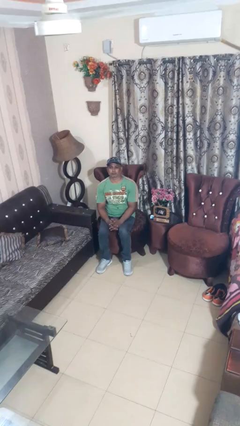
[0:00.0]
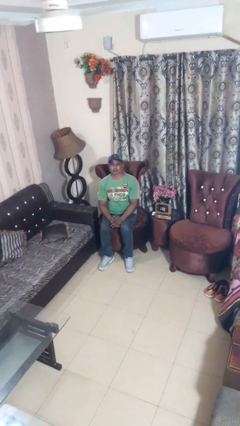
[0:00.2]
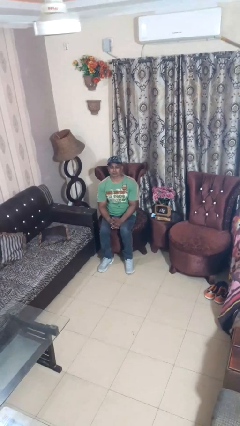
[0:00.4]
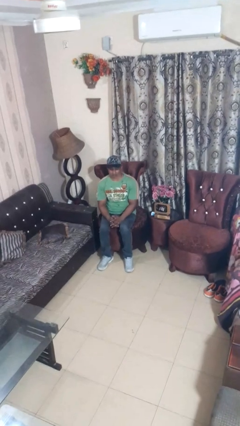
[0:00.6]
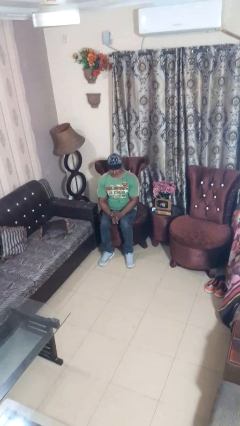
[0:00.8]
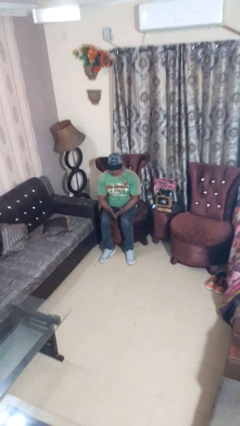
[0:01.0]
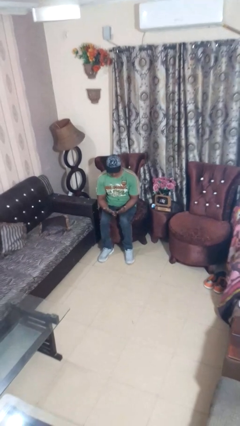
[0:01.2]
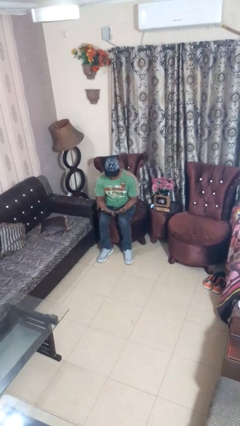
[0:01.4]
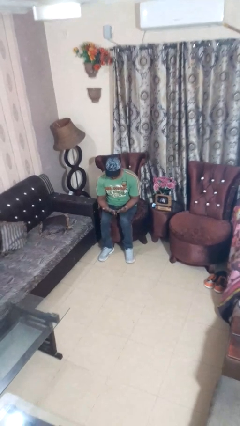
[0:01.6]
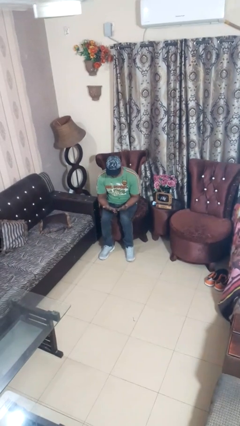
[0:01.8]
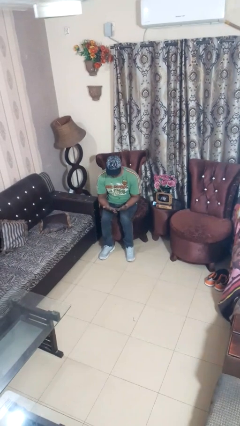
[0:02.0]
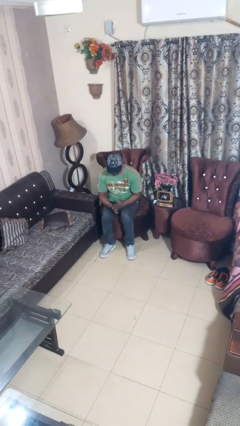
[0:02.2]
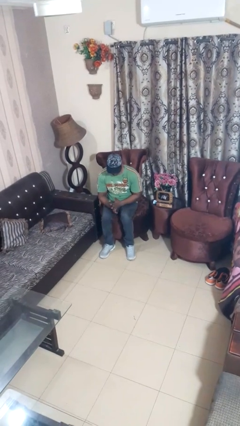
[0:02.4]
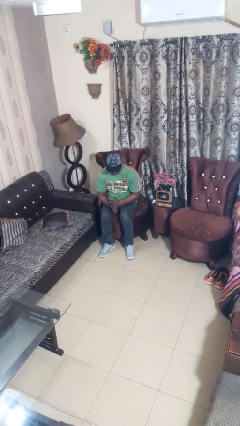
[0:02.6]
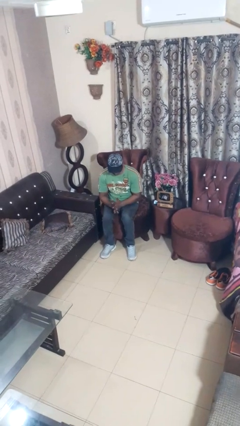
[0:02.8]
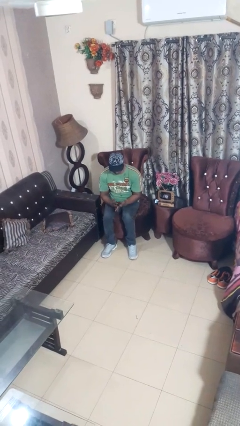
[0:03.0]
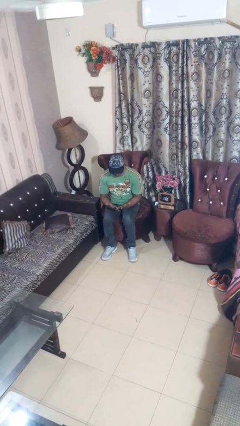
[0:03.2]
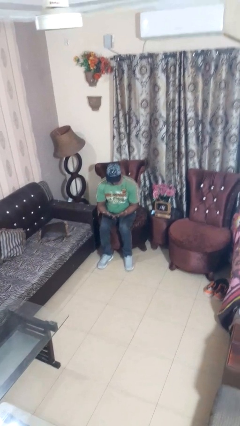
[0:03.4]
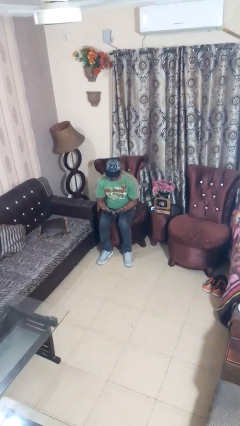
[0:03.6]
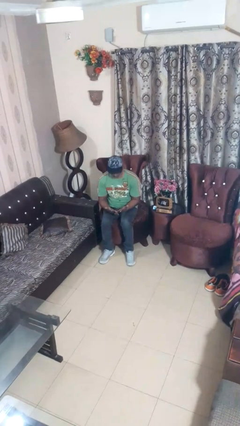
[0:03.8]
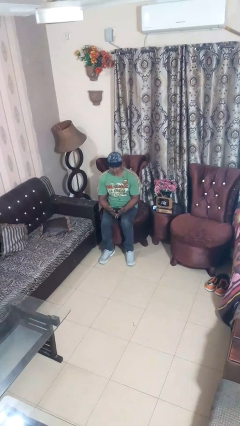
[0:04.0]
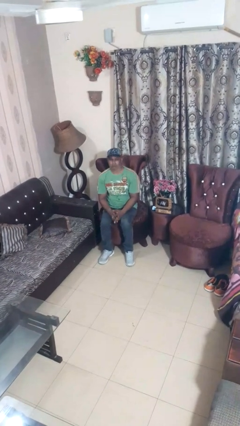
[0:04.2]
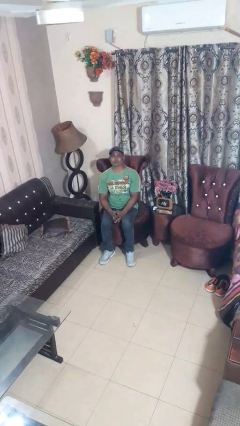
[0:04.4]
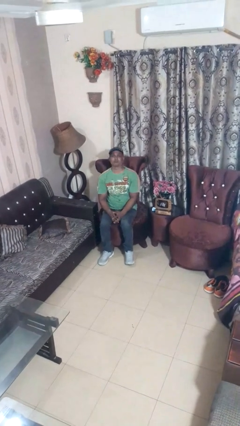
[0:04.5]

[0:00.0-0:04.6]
person looks at hands in lap

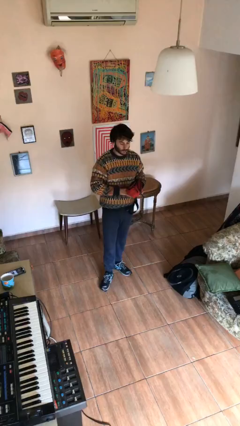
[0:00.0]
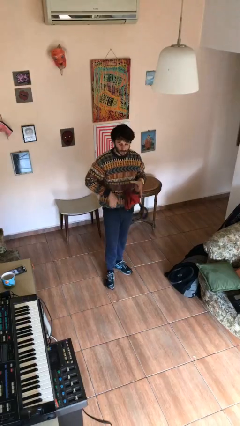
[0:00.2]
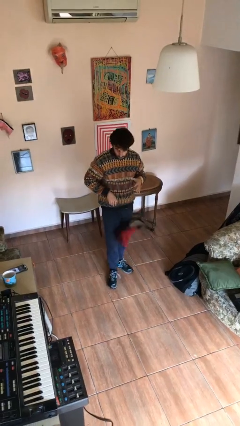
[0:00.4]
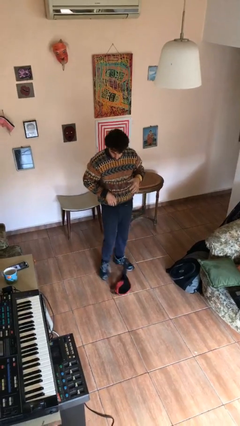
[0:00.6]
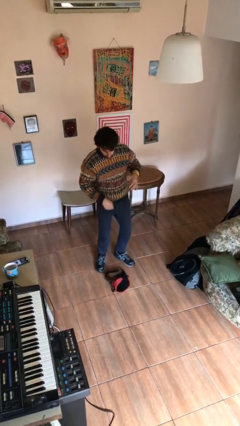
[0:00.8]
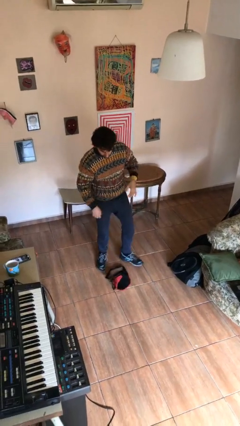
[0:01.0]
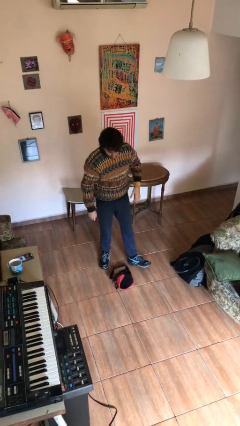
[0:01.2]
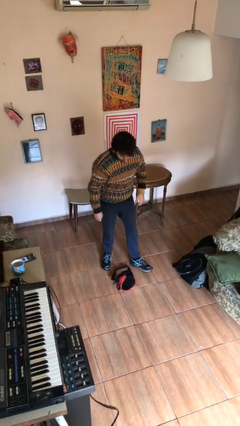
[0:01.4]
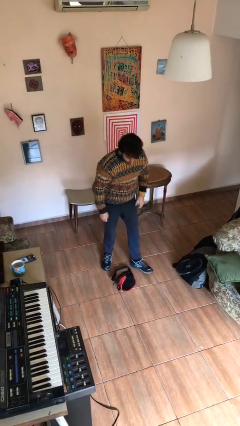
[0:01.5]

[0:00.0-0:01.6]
person drops object

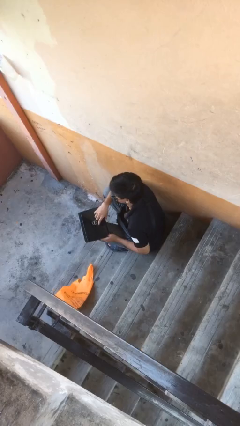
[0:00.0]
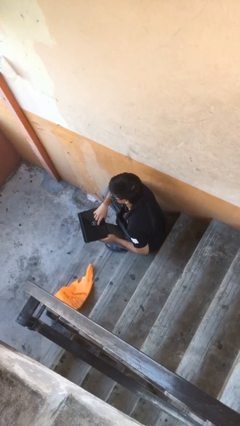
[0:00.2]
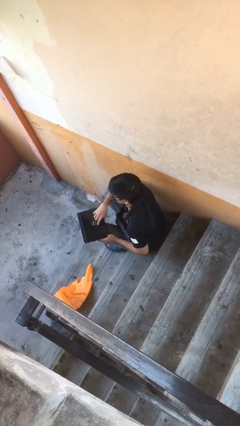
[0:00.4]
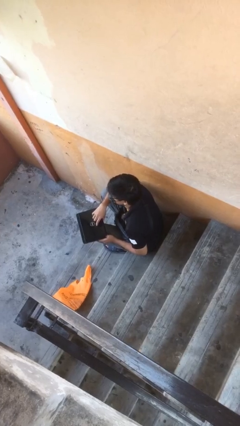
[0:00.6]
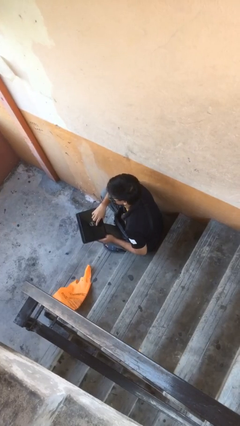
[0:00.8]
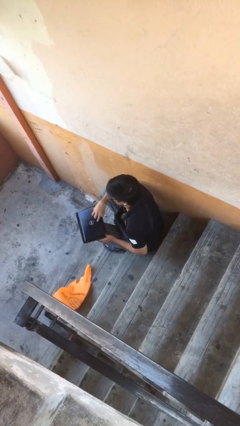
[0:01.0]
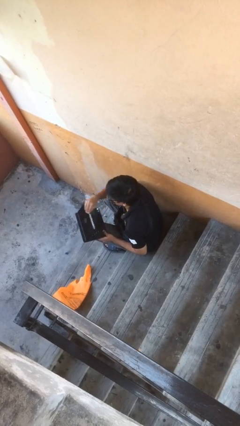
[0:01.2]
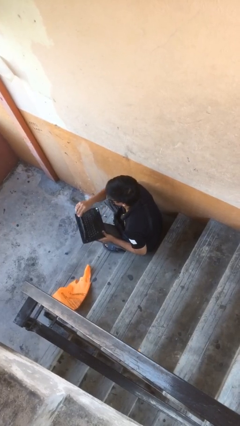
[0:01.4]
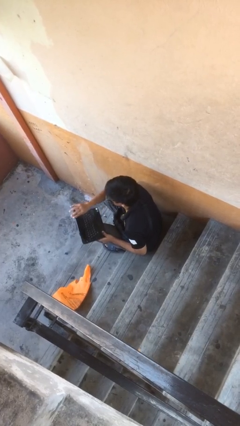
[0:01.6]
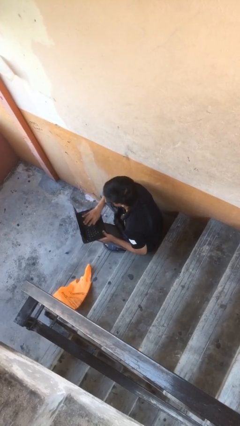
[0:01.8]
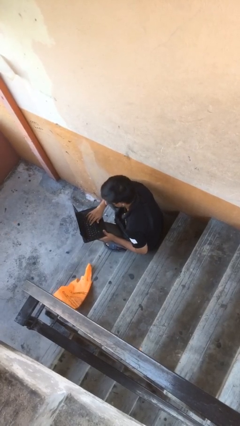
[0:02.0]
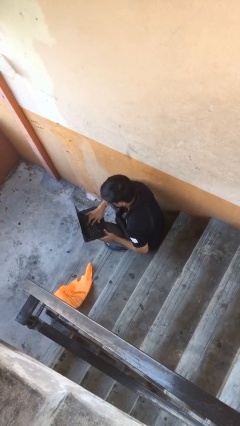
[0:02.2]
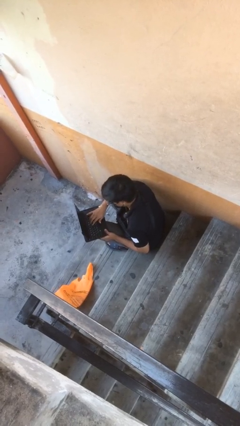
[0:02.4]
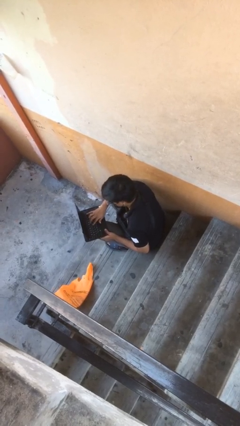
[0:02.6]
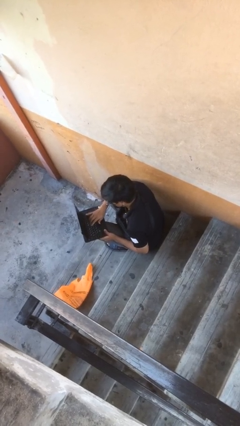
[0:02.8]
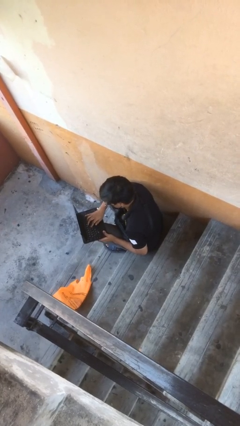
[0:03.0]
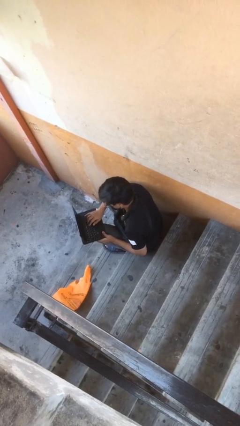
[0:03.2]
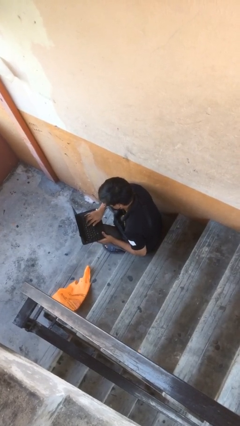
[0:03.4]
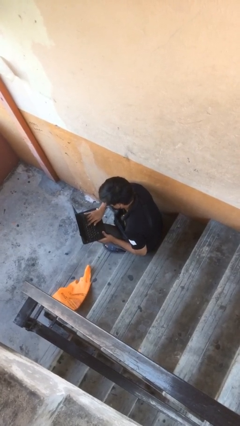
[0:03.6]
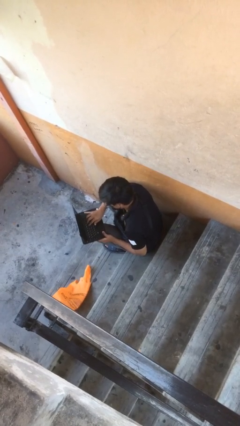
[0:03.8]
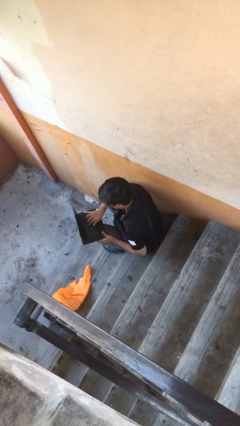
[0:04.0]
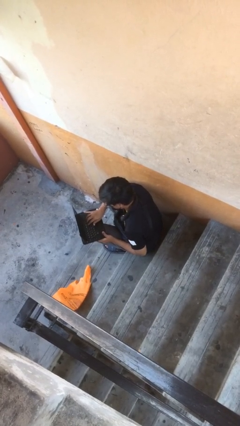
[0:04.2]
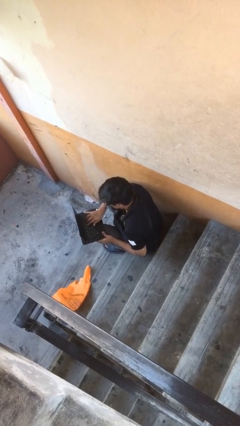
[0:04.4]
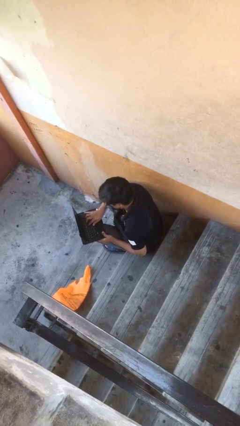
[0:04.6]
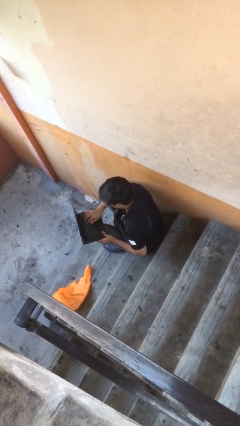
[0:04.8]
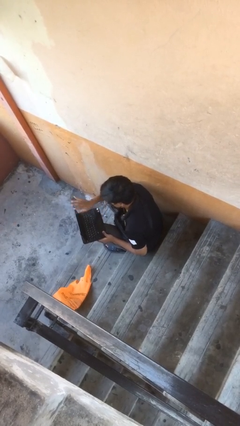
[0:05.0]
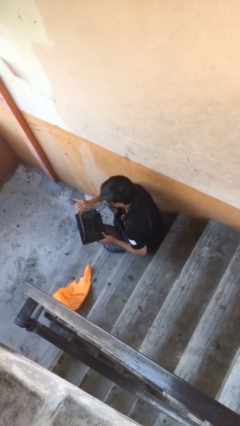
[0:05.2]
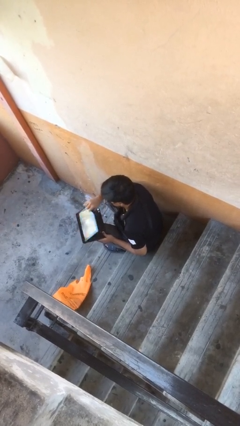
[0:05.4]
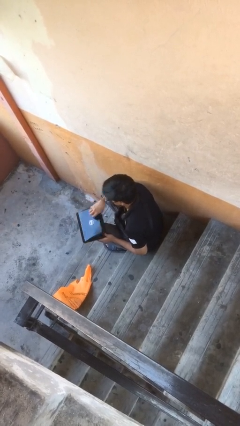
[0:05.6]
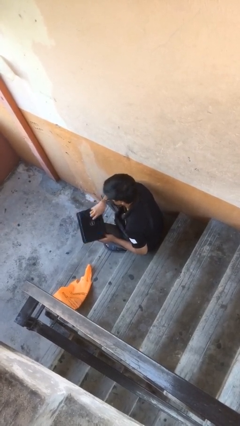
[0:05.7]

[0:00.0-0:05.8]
person interacts with laptop

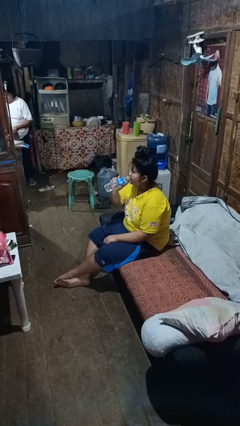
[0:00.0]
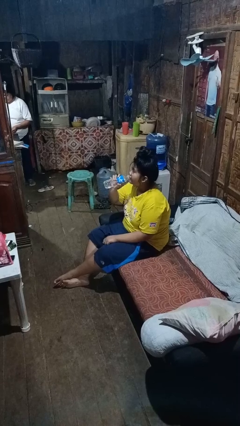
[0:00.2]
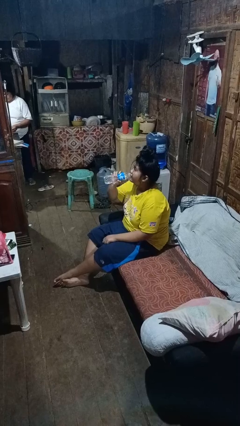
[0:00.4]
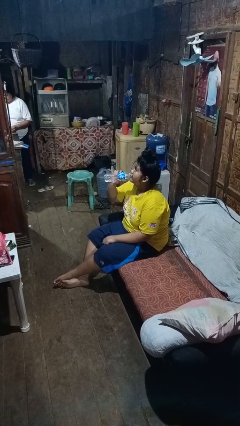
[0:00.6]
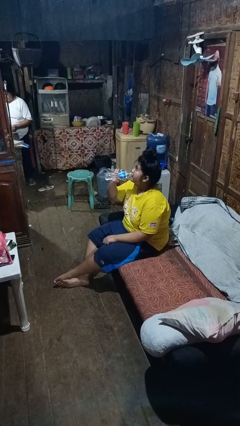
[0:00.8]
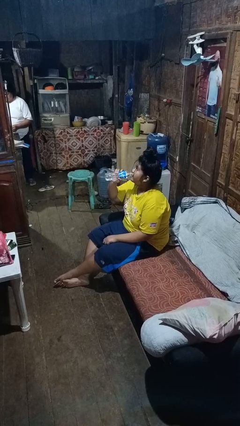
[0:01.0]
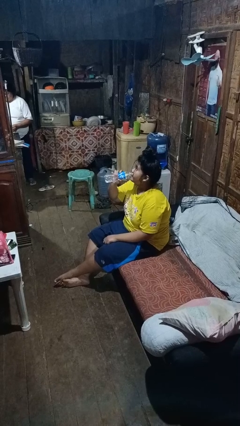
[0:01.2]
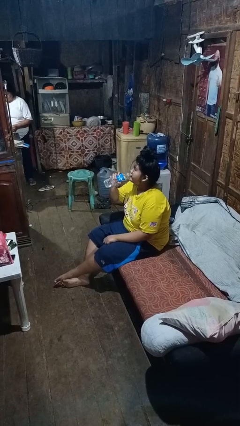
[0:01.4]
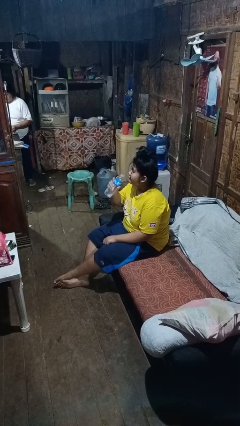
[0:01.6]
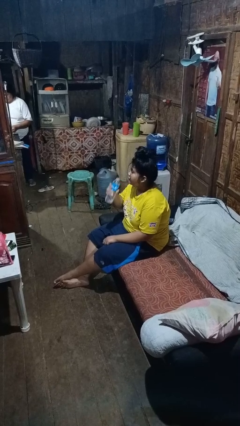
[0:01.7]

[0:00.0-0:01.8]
person drinks from bottle

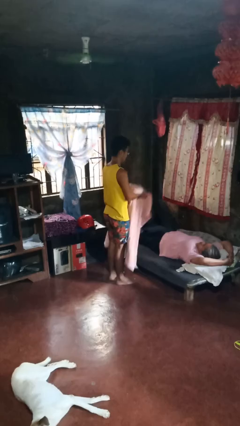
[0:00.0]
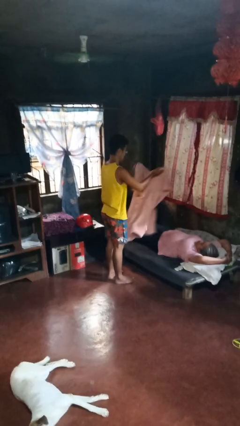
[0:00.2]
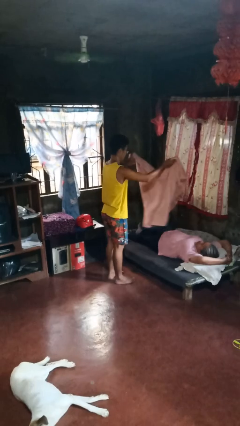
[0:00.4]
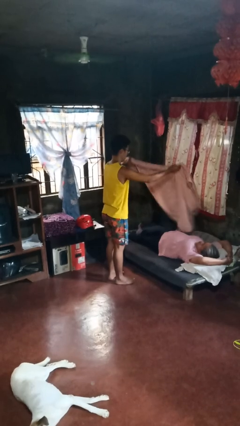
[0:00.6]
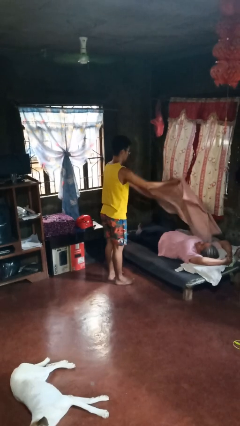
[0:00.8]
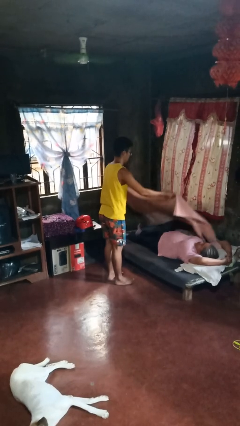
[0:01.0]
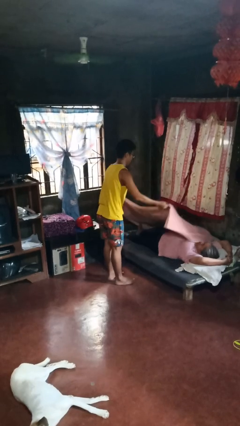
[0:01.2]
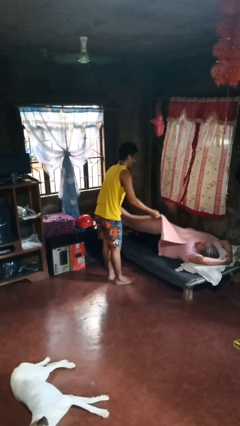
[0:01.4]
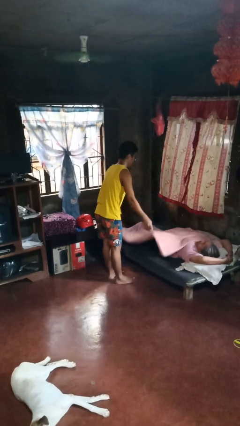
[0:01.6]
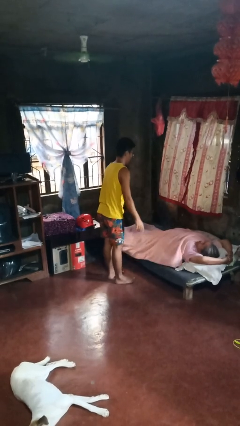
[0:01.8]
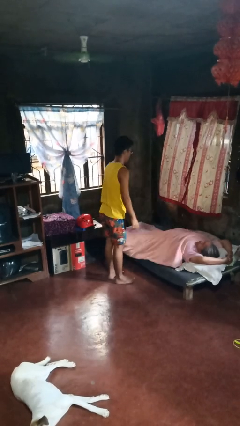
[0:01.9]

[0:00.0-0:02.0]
person covers friend with blanket

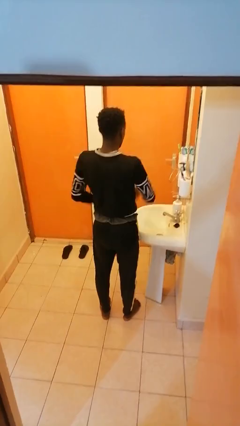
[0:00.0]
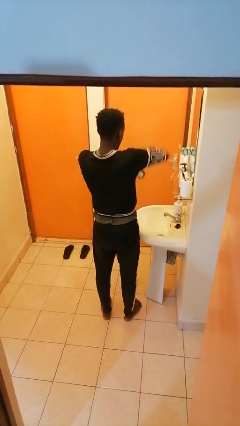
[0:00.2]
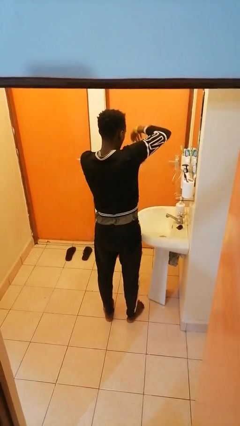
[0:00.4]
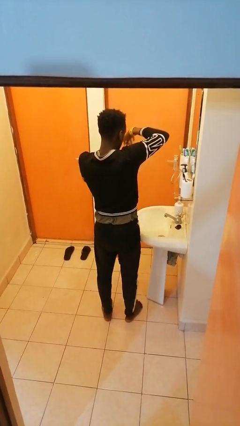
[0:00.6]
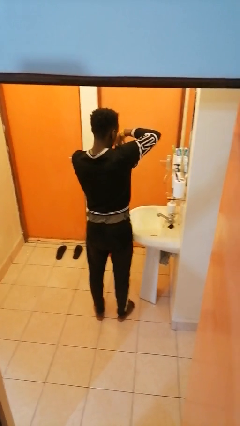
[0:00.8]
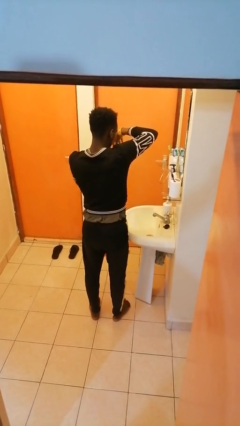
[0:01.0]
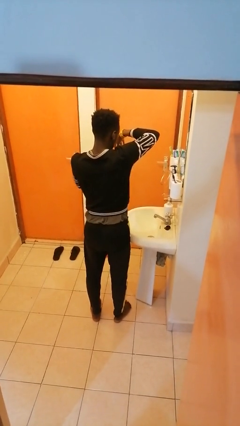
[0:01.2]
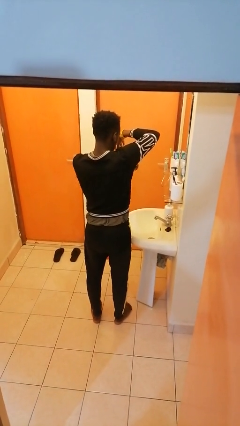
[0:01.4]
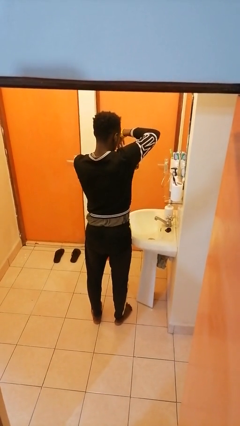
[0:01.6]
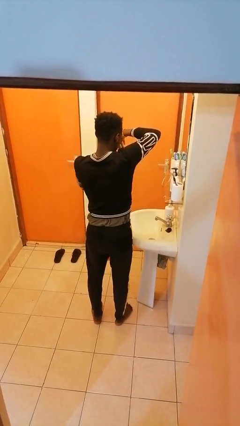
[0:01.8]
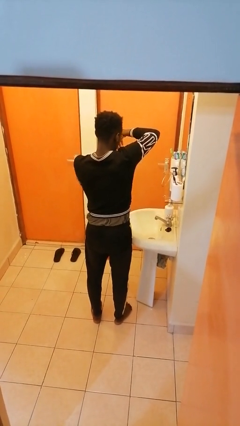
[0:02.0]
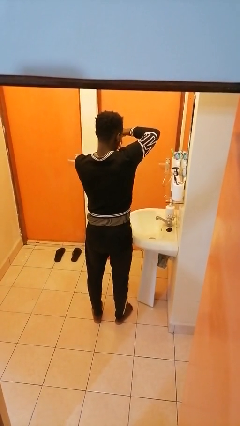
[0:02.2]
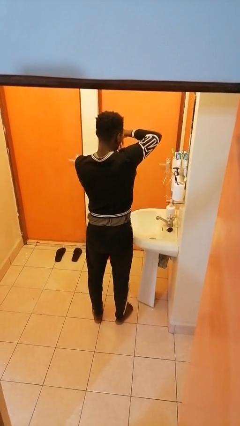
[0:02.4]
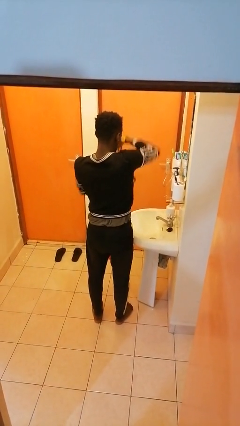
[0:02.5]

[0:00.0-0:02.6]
person applies deodorant
